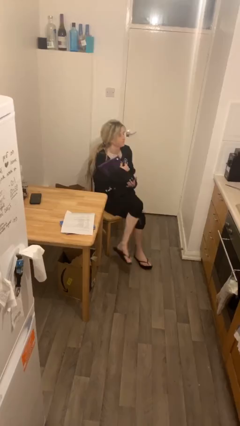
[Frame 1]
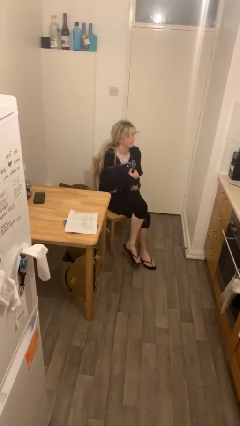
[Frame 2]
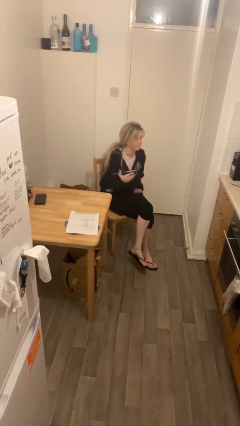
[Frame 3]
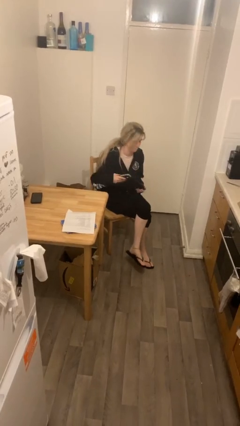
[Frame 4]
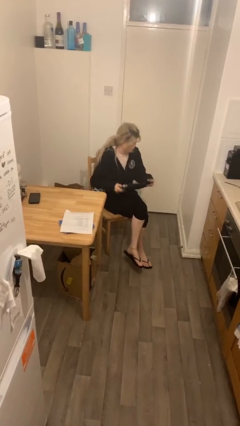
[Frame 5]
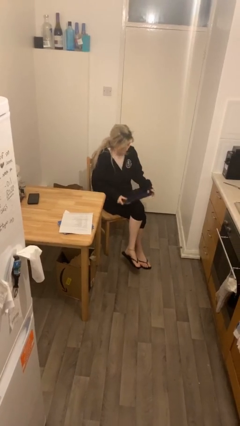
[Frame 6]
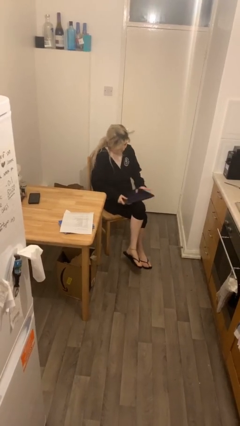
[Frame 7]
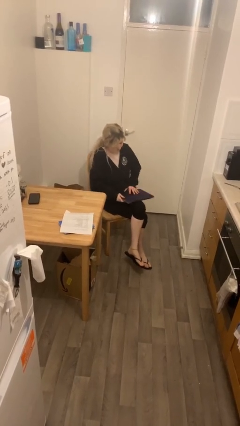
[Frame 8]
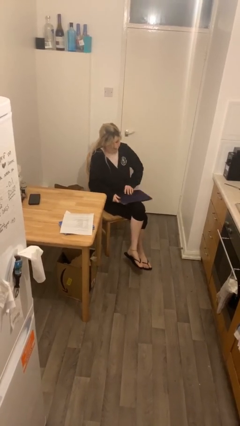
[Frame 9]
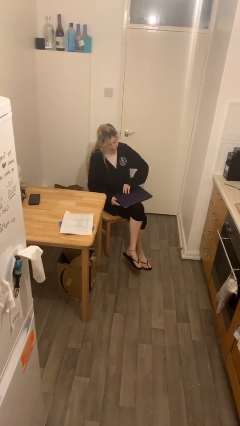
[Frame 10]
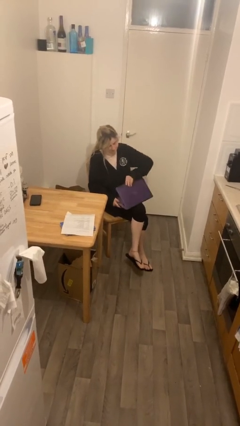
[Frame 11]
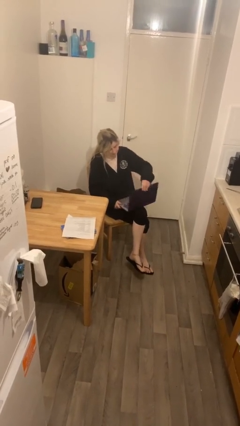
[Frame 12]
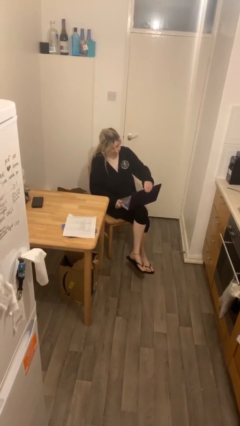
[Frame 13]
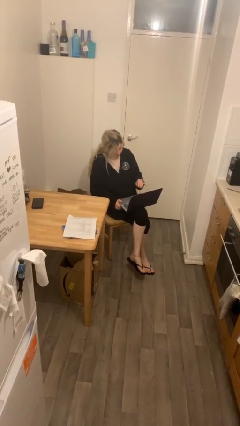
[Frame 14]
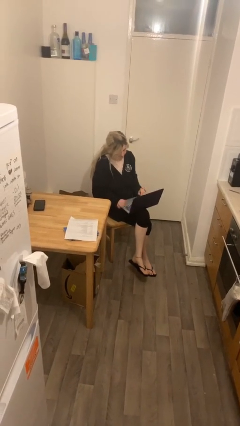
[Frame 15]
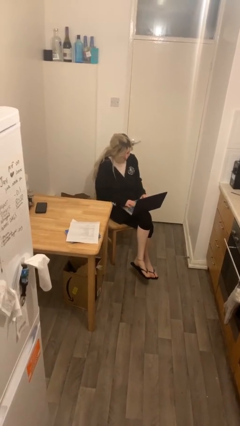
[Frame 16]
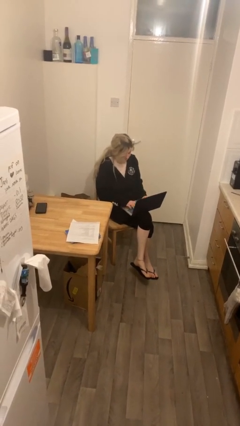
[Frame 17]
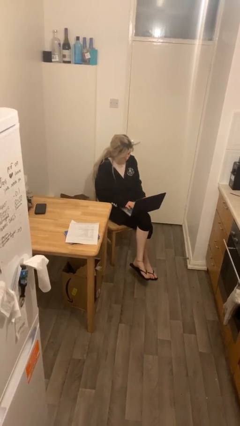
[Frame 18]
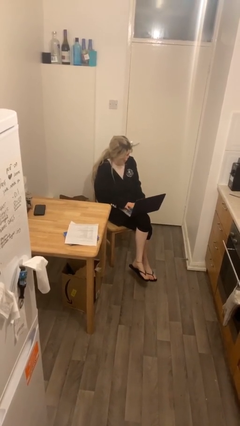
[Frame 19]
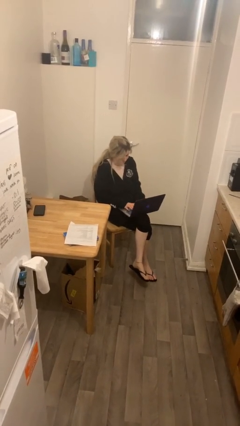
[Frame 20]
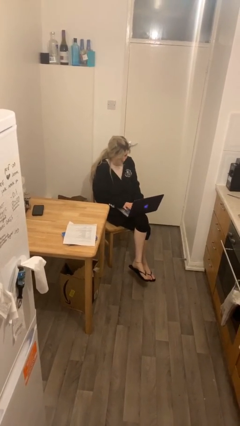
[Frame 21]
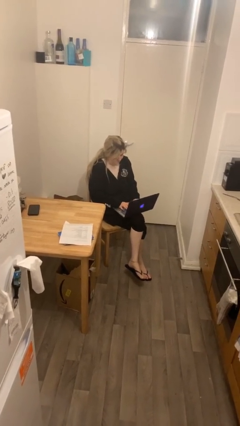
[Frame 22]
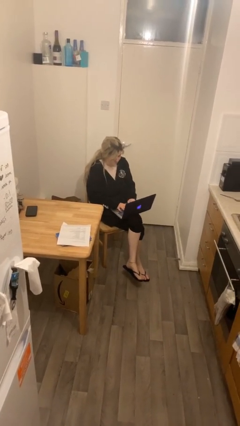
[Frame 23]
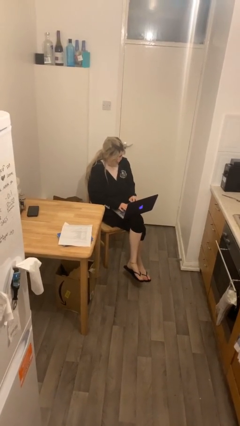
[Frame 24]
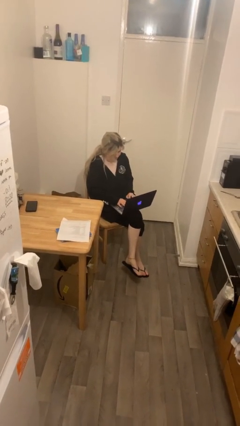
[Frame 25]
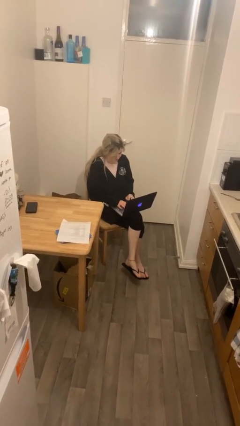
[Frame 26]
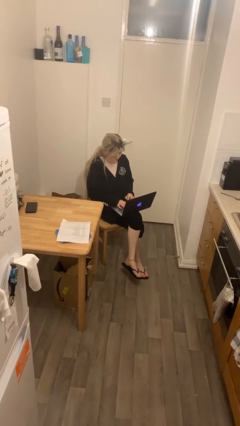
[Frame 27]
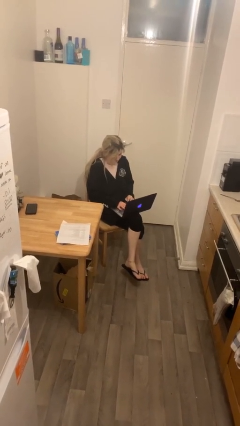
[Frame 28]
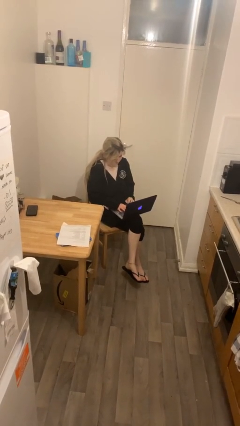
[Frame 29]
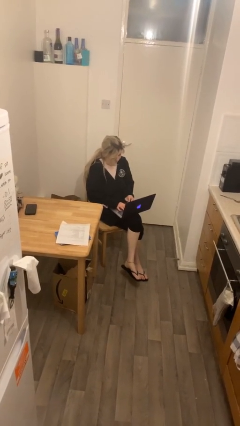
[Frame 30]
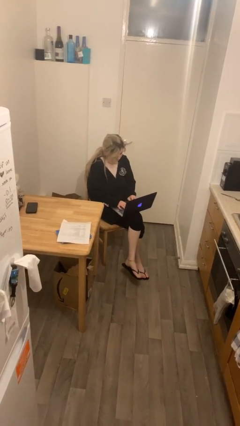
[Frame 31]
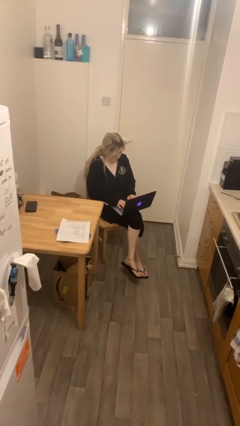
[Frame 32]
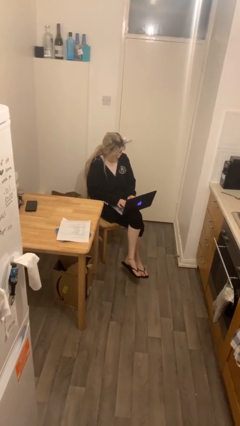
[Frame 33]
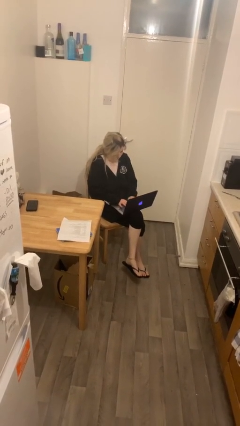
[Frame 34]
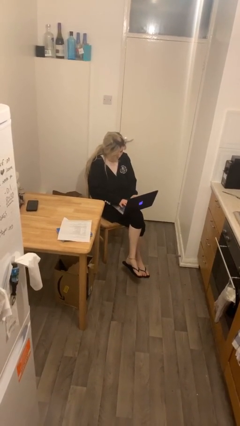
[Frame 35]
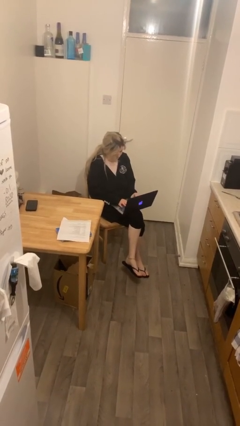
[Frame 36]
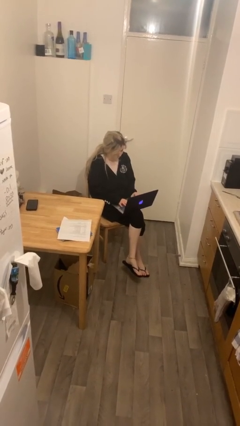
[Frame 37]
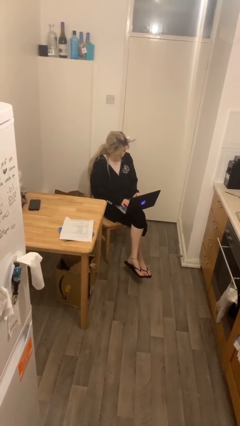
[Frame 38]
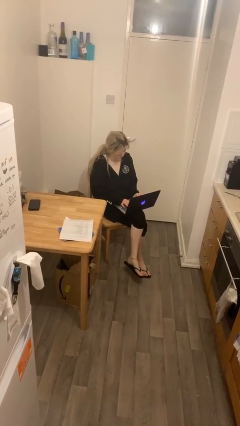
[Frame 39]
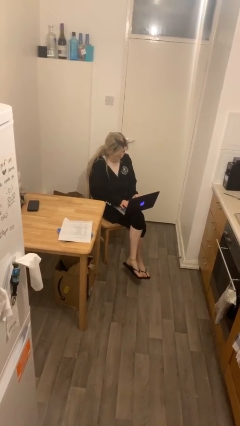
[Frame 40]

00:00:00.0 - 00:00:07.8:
person interacts with laptop

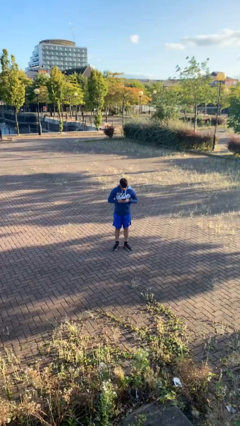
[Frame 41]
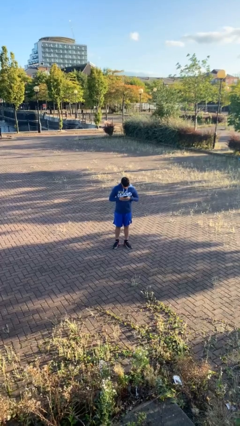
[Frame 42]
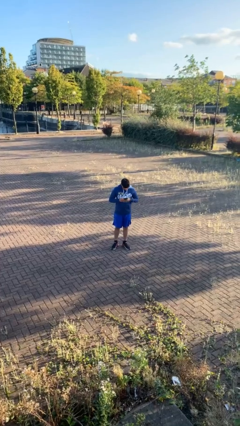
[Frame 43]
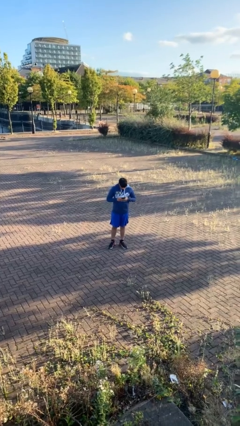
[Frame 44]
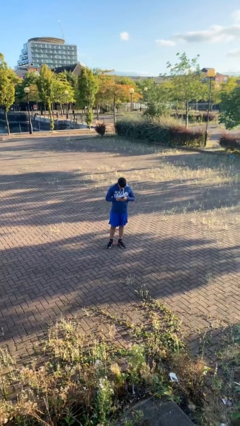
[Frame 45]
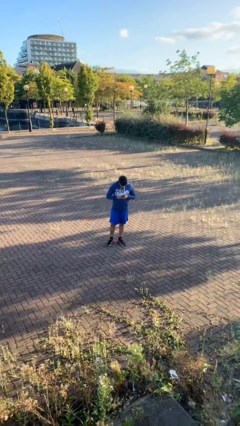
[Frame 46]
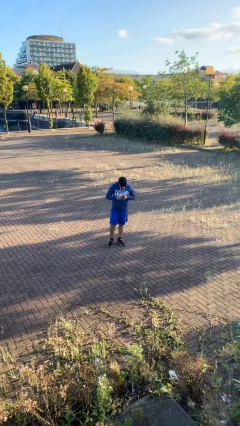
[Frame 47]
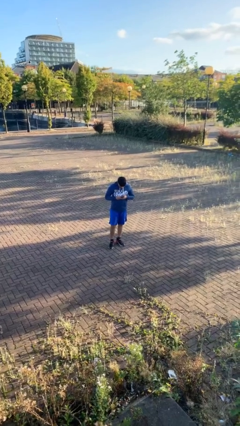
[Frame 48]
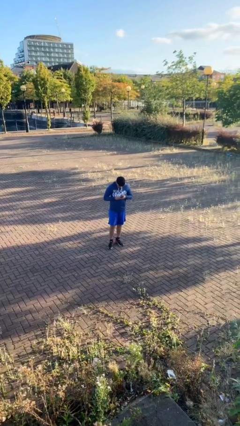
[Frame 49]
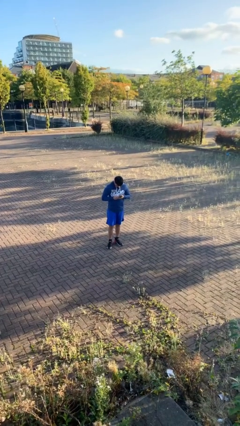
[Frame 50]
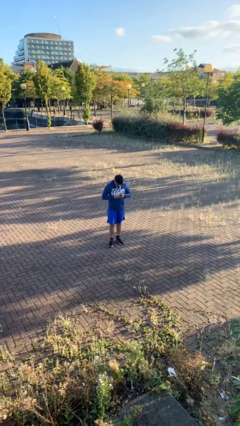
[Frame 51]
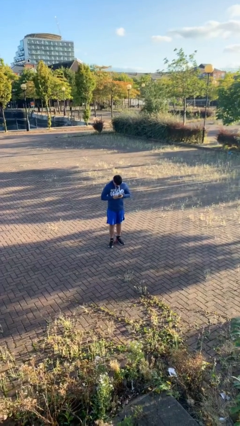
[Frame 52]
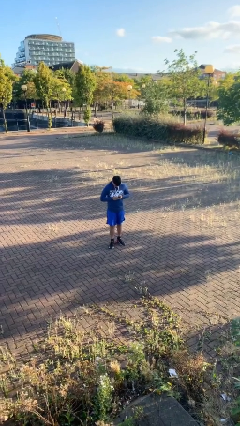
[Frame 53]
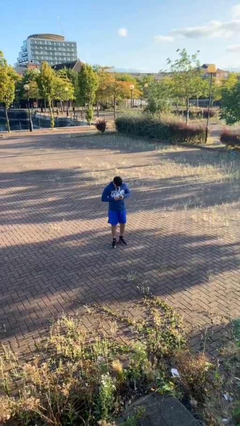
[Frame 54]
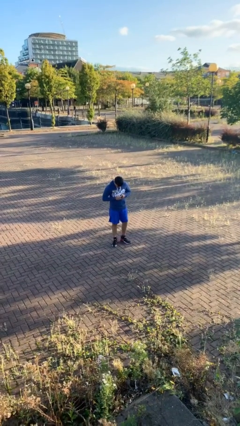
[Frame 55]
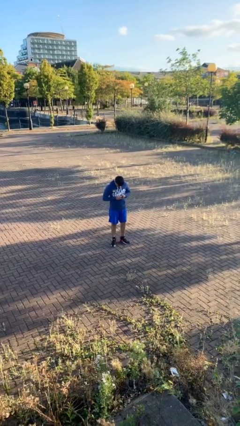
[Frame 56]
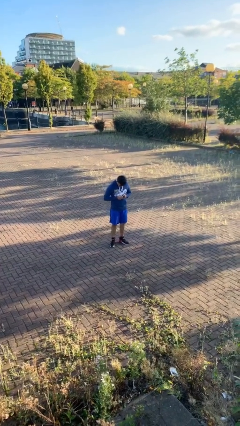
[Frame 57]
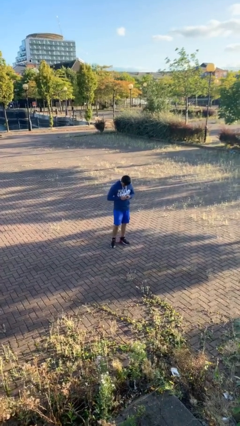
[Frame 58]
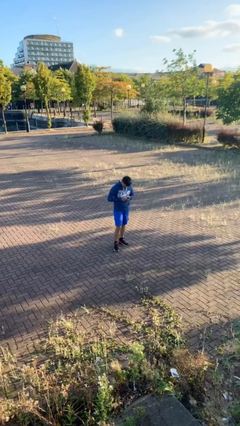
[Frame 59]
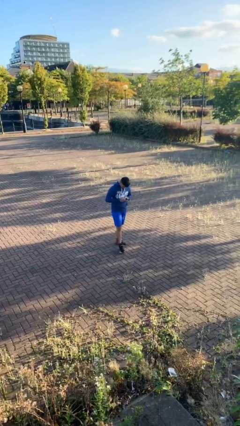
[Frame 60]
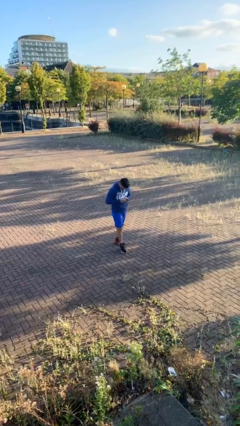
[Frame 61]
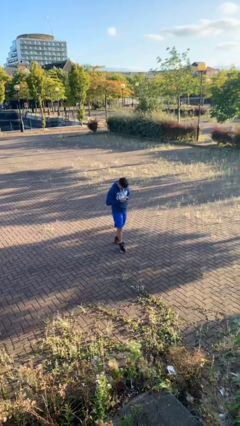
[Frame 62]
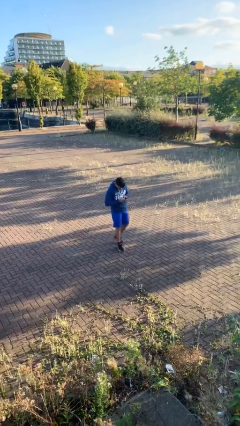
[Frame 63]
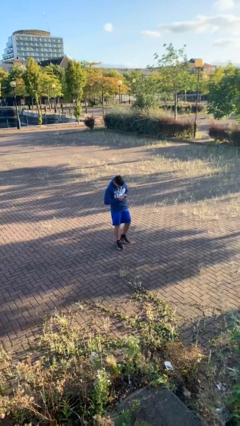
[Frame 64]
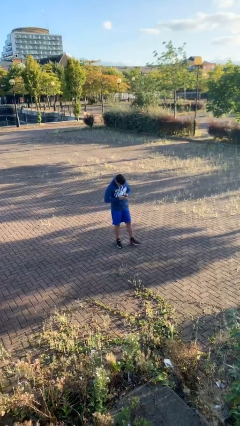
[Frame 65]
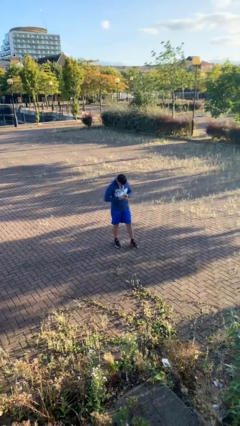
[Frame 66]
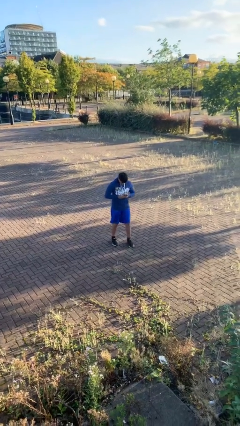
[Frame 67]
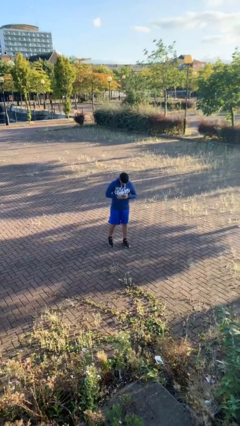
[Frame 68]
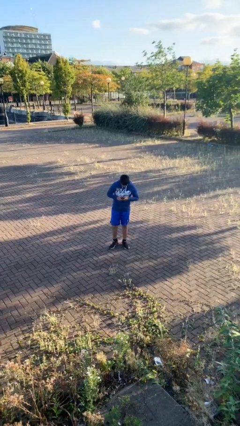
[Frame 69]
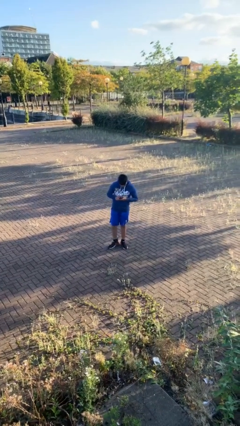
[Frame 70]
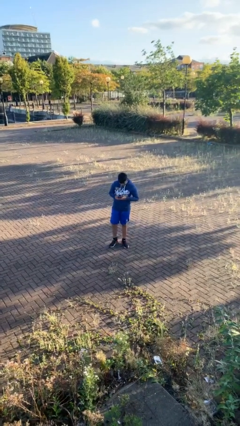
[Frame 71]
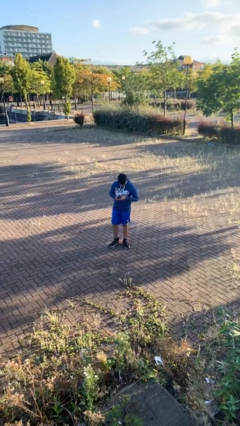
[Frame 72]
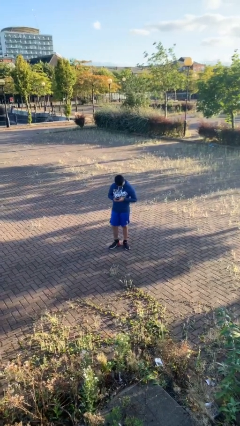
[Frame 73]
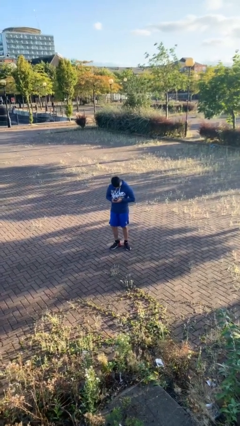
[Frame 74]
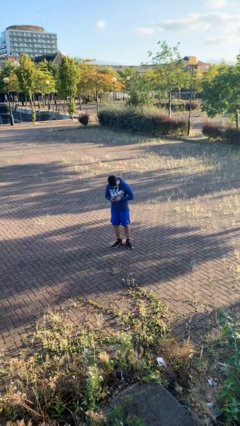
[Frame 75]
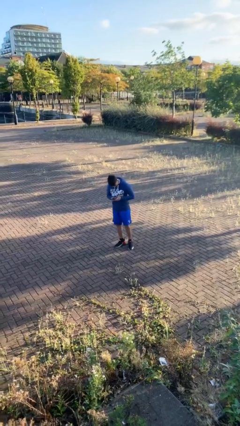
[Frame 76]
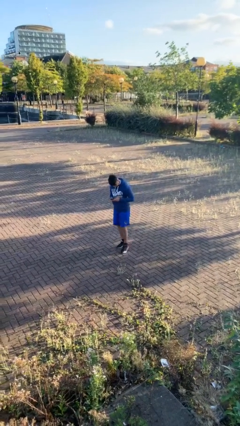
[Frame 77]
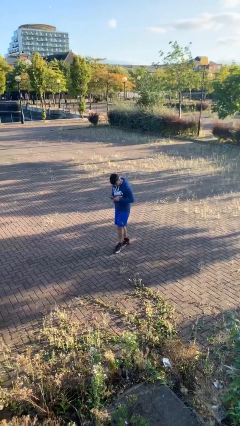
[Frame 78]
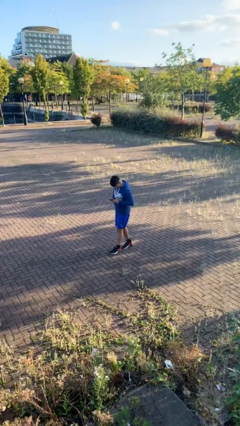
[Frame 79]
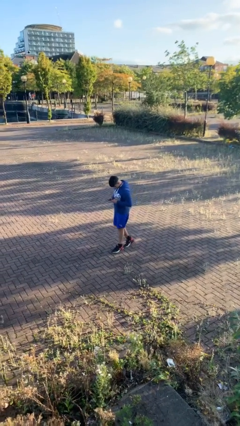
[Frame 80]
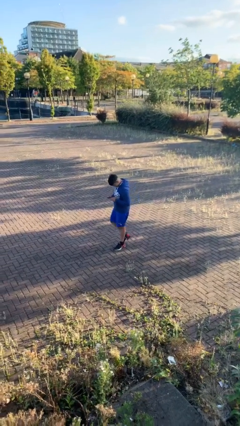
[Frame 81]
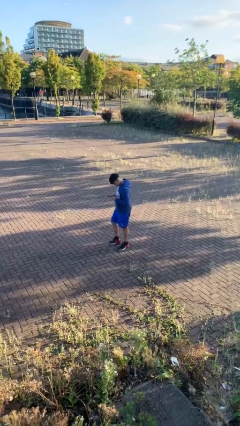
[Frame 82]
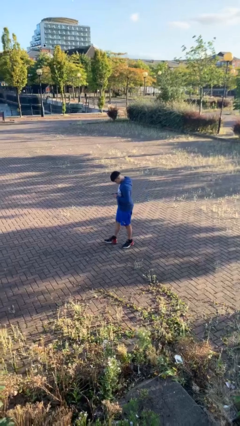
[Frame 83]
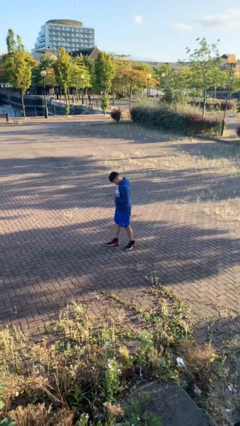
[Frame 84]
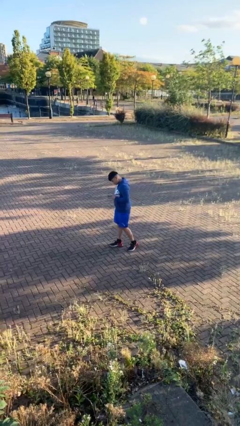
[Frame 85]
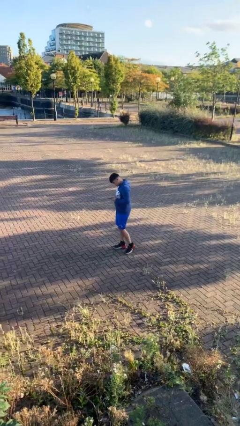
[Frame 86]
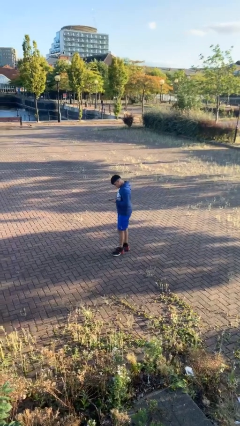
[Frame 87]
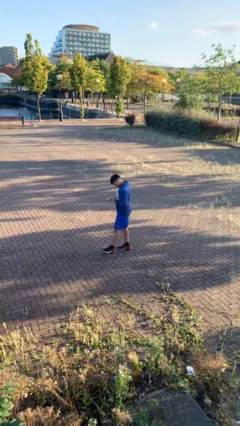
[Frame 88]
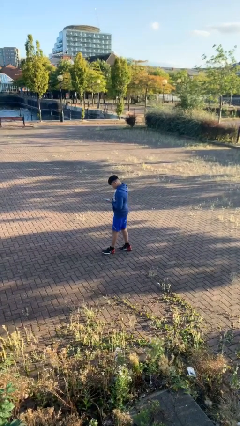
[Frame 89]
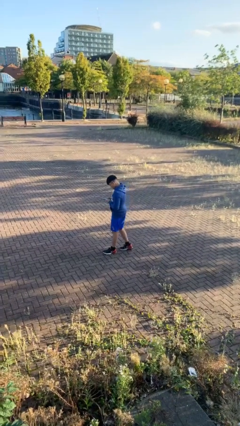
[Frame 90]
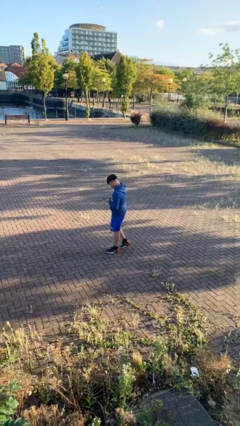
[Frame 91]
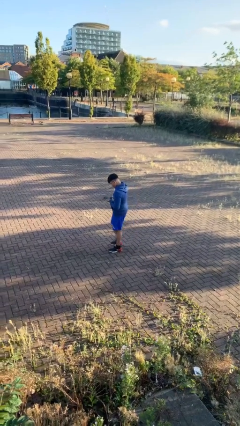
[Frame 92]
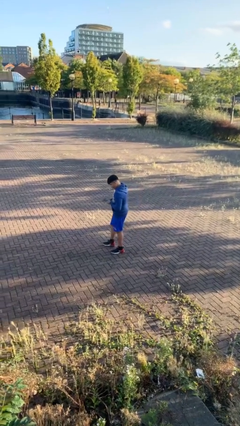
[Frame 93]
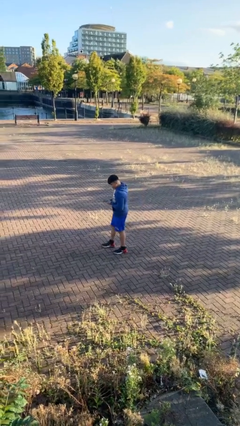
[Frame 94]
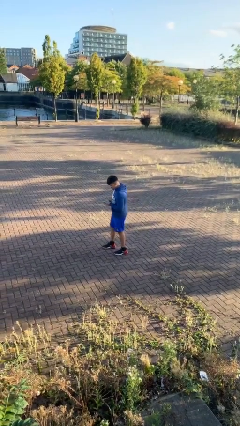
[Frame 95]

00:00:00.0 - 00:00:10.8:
person texts on phone
